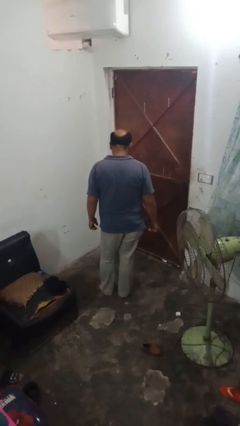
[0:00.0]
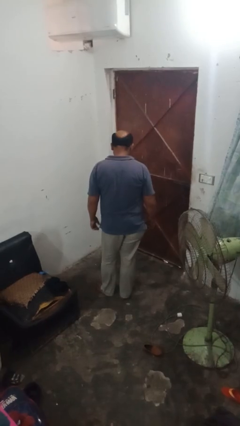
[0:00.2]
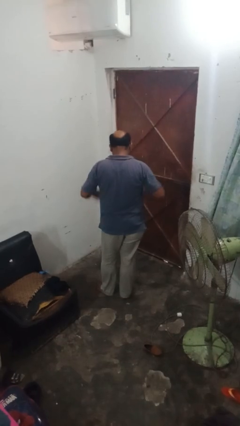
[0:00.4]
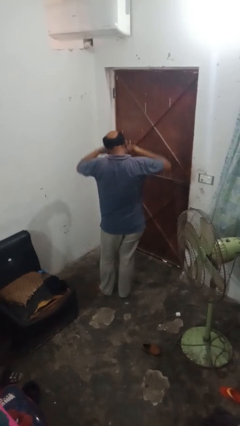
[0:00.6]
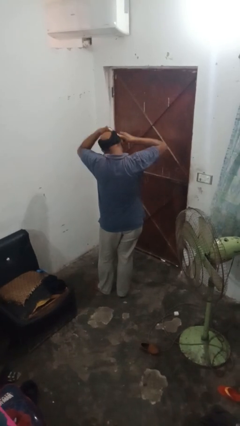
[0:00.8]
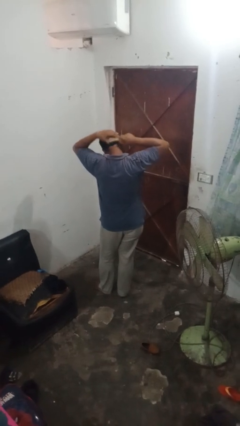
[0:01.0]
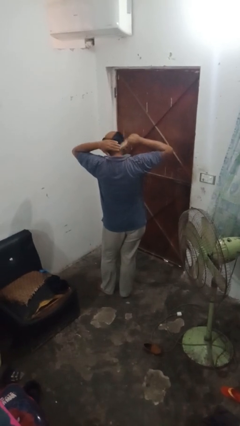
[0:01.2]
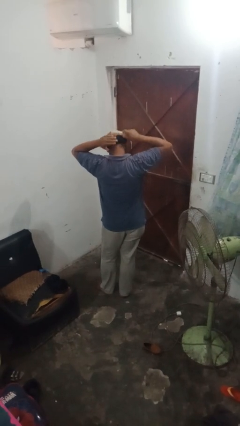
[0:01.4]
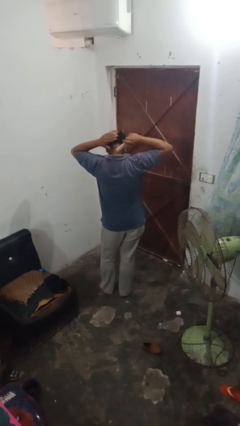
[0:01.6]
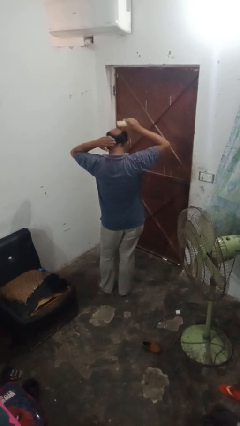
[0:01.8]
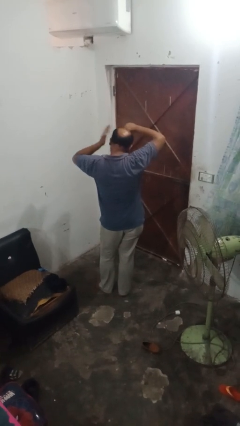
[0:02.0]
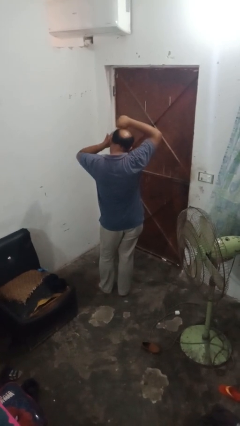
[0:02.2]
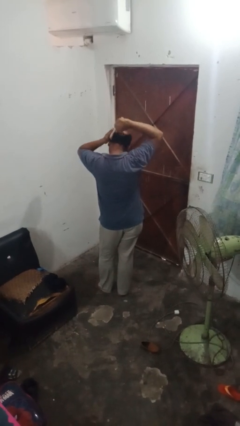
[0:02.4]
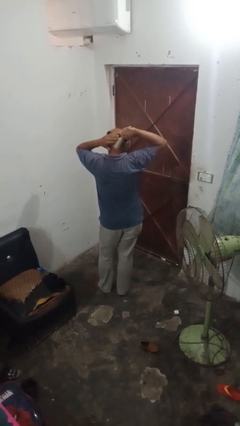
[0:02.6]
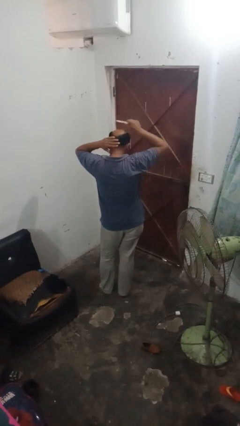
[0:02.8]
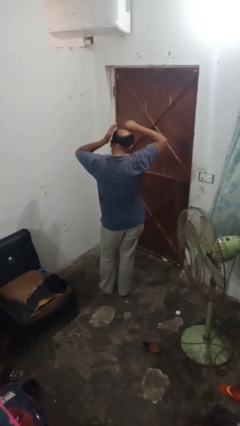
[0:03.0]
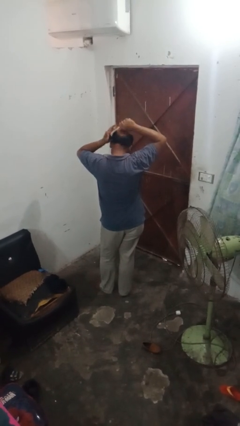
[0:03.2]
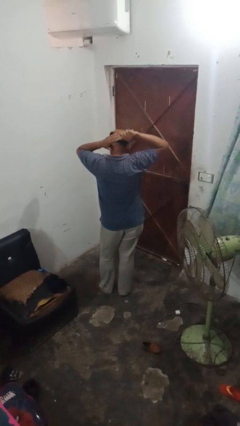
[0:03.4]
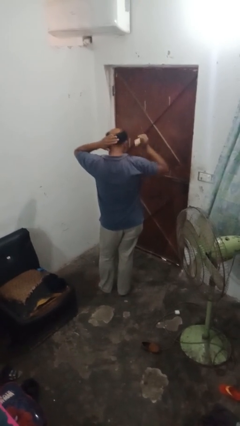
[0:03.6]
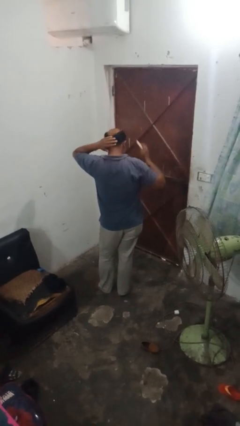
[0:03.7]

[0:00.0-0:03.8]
person brushes hair

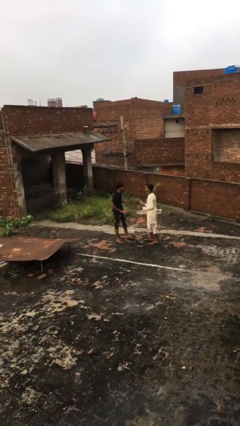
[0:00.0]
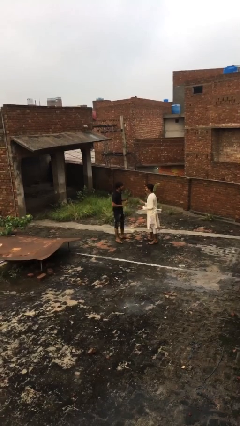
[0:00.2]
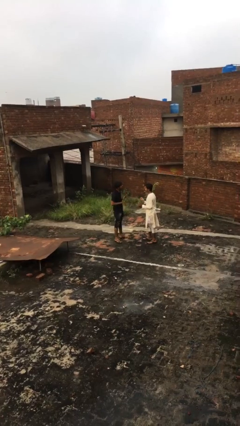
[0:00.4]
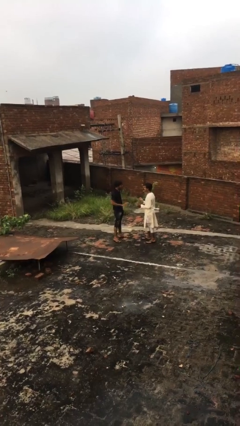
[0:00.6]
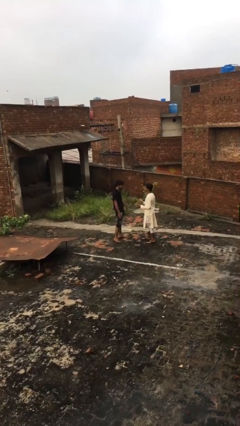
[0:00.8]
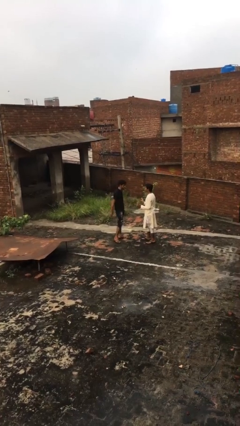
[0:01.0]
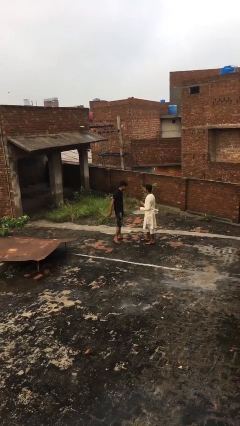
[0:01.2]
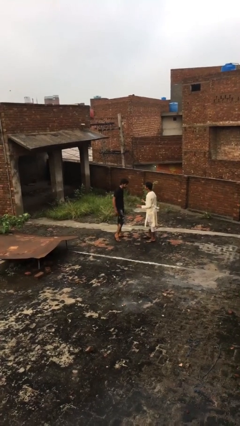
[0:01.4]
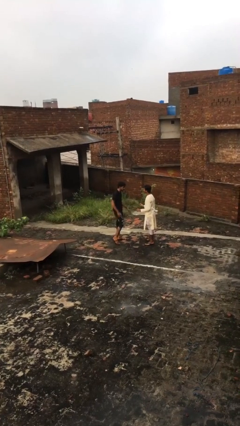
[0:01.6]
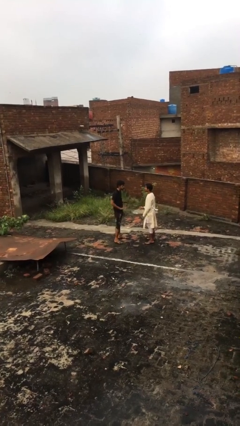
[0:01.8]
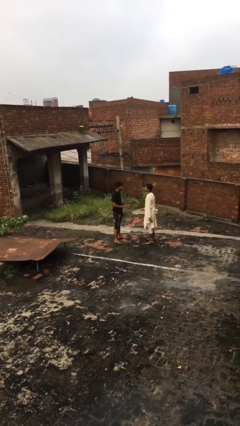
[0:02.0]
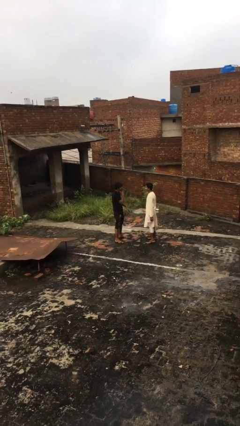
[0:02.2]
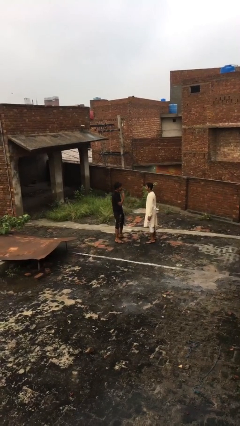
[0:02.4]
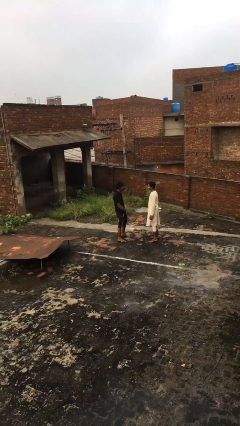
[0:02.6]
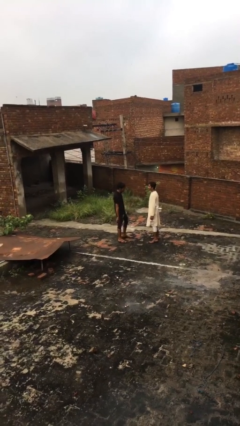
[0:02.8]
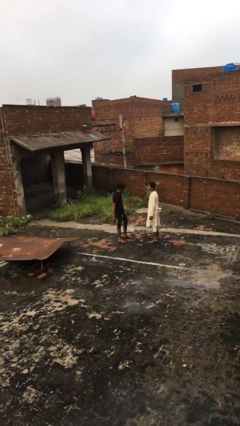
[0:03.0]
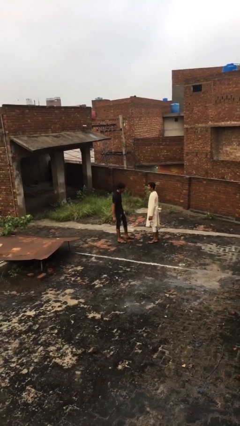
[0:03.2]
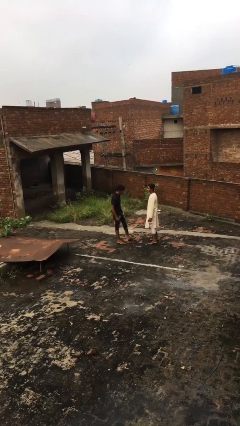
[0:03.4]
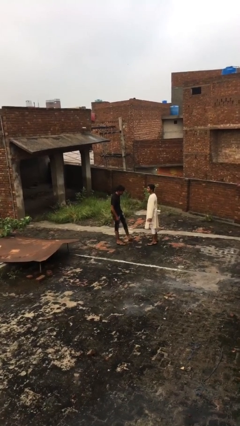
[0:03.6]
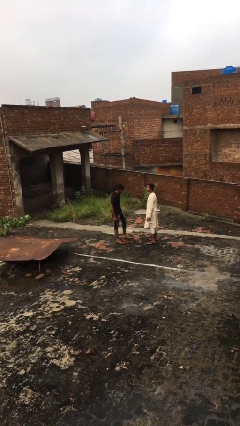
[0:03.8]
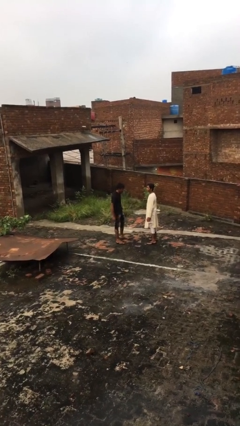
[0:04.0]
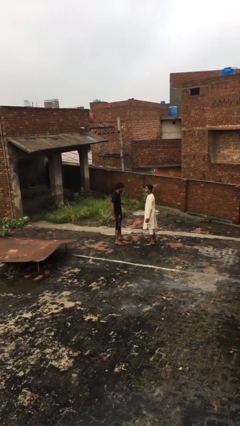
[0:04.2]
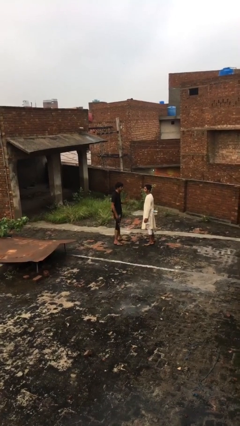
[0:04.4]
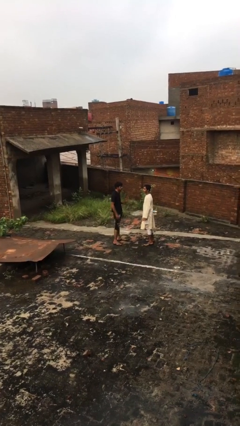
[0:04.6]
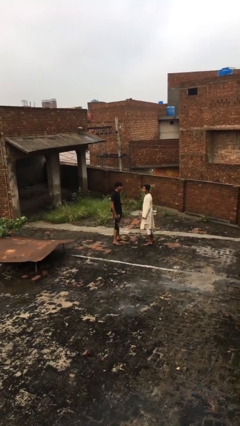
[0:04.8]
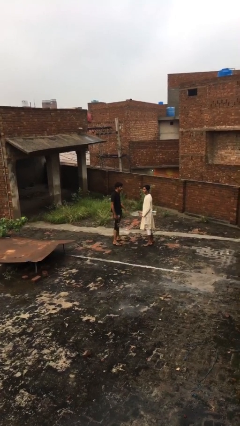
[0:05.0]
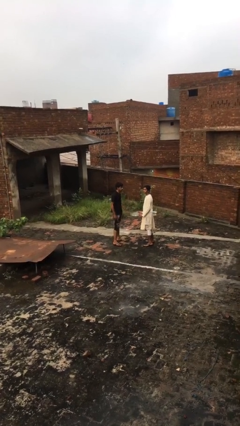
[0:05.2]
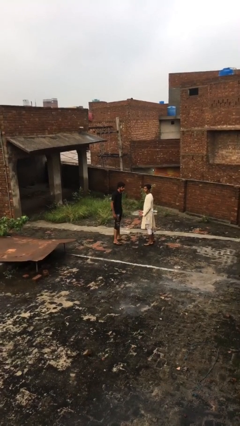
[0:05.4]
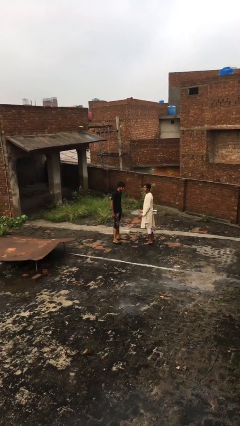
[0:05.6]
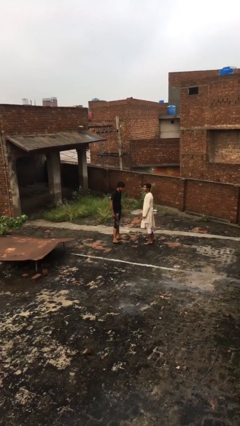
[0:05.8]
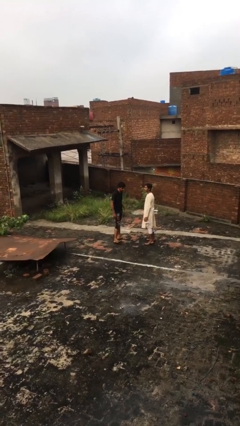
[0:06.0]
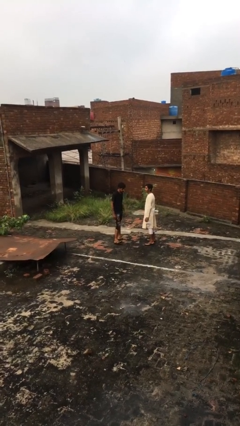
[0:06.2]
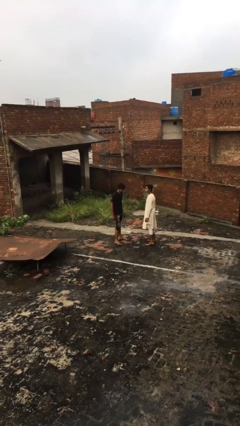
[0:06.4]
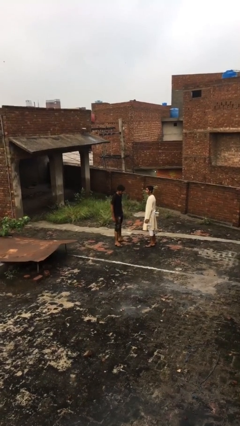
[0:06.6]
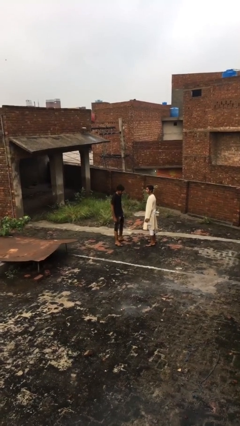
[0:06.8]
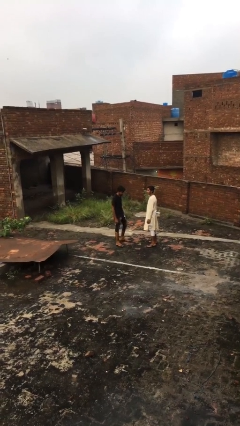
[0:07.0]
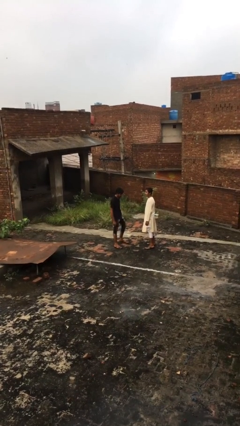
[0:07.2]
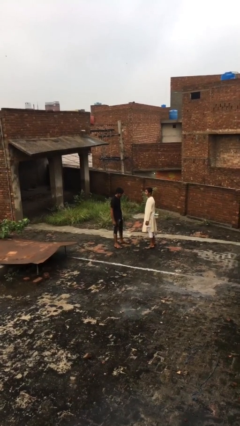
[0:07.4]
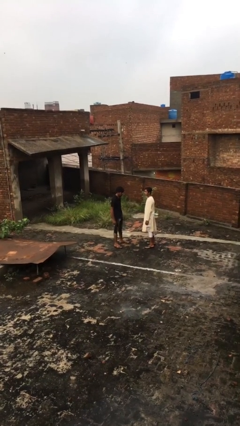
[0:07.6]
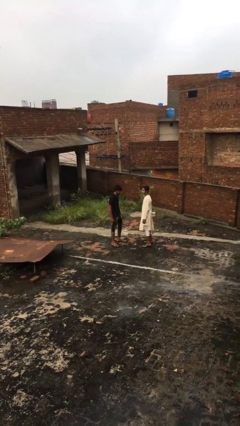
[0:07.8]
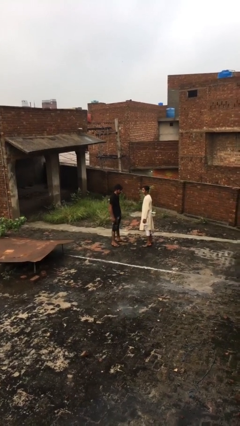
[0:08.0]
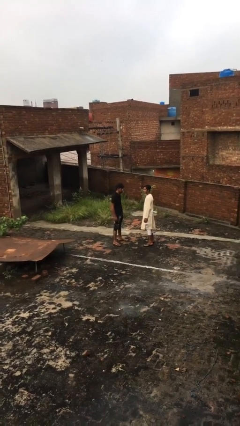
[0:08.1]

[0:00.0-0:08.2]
person talks to person

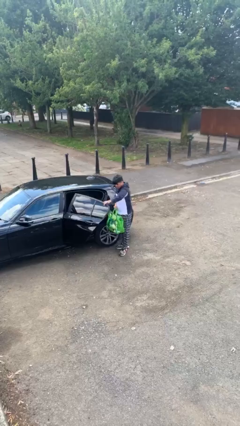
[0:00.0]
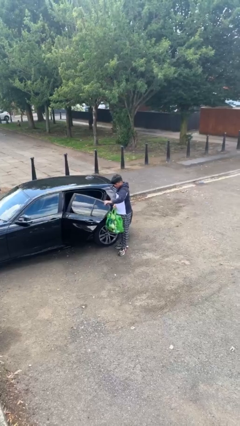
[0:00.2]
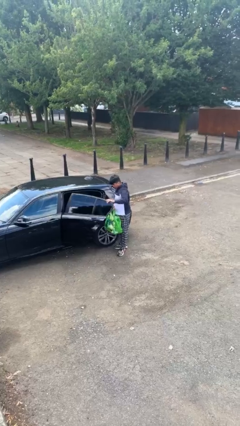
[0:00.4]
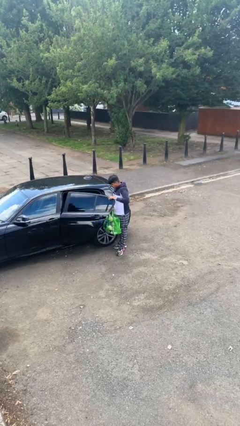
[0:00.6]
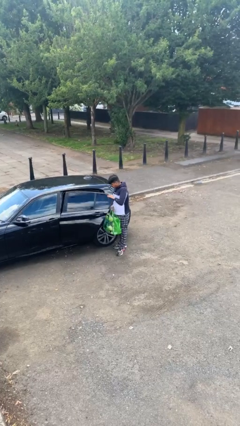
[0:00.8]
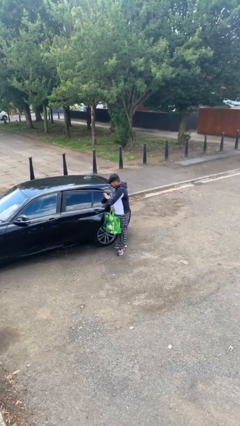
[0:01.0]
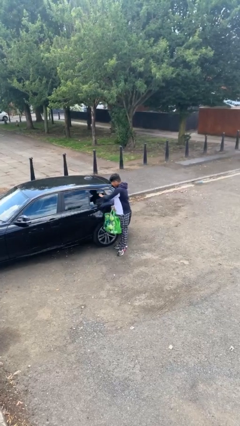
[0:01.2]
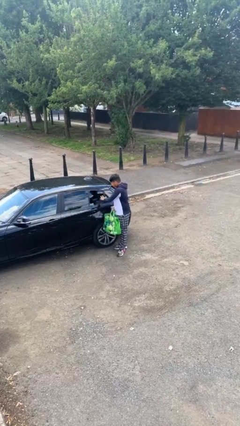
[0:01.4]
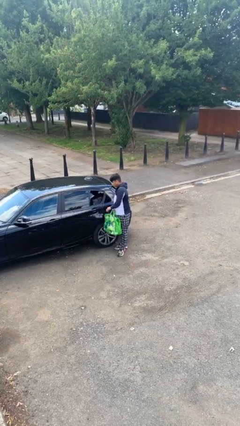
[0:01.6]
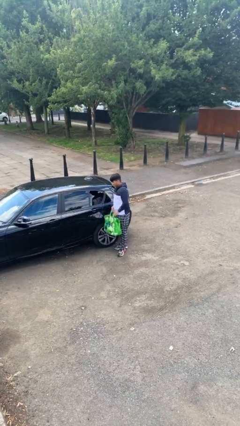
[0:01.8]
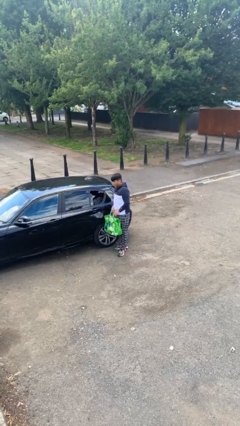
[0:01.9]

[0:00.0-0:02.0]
person closes car door

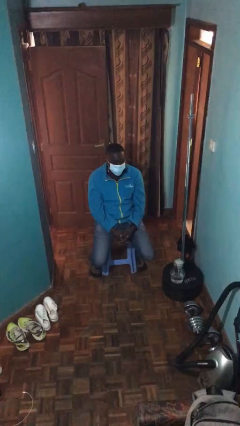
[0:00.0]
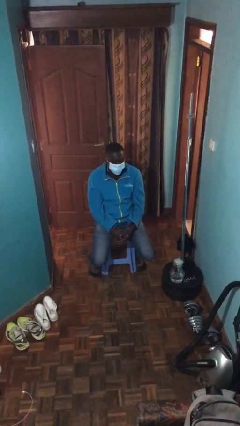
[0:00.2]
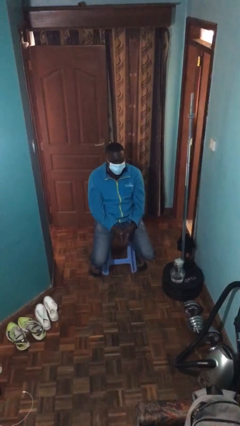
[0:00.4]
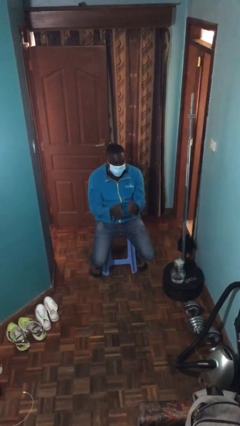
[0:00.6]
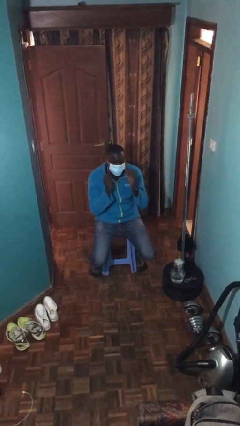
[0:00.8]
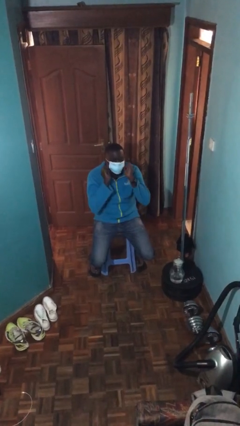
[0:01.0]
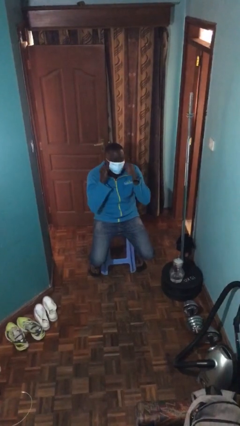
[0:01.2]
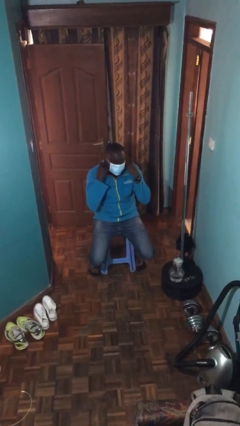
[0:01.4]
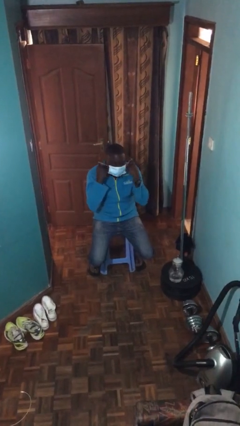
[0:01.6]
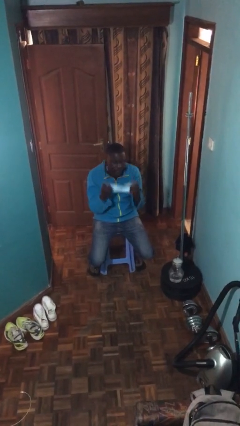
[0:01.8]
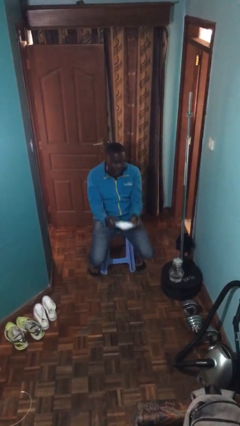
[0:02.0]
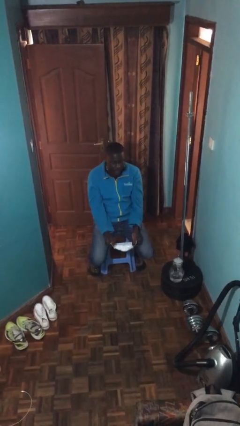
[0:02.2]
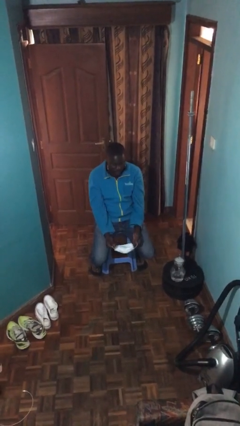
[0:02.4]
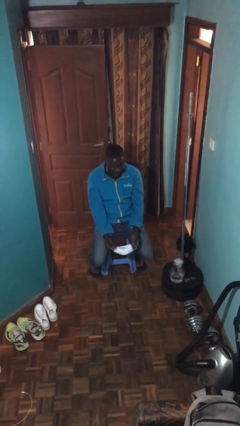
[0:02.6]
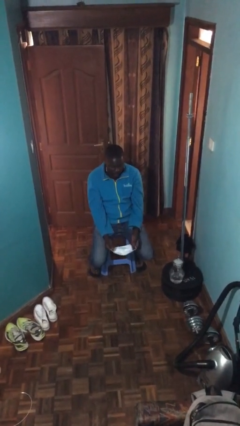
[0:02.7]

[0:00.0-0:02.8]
person takes off facemask

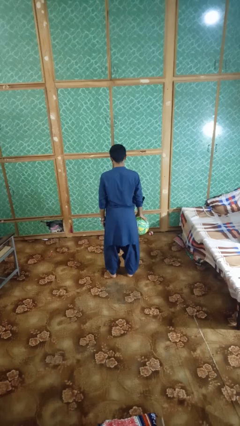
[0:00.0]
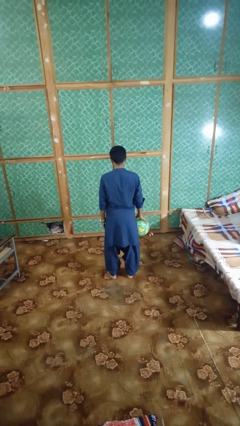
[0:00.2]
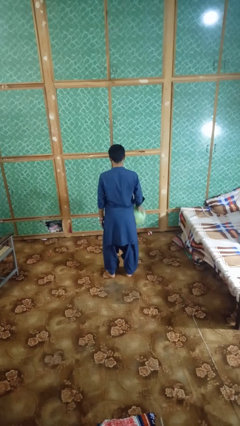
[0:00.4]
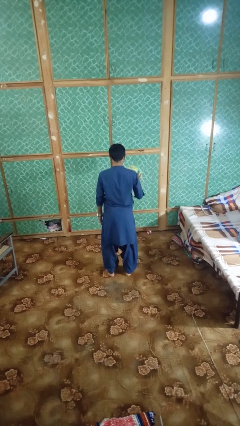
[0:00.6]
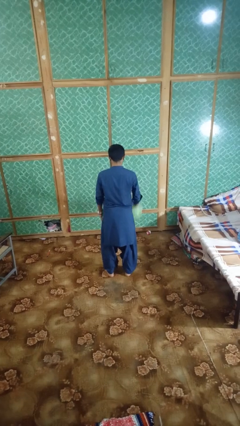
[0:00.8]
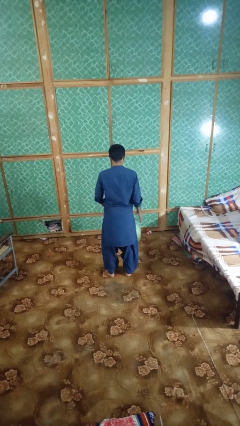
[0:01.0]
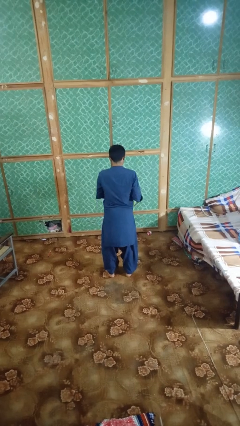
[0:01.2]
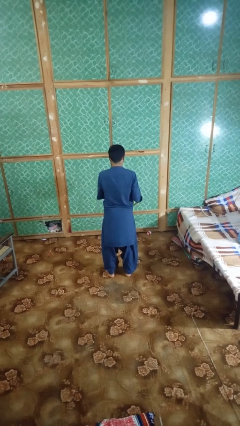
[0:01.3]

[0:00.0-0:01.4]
person bounces ball on floor
